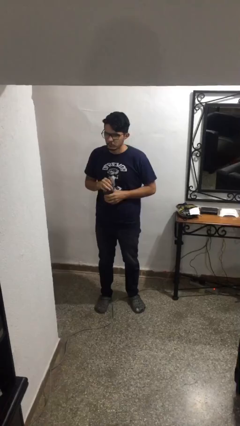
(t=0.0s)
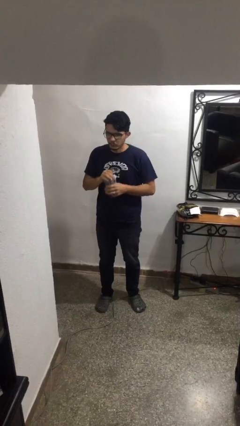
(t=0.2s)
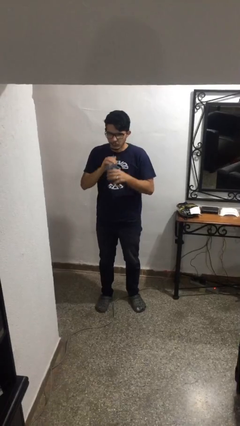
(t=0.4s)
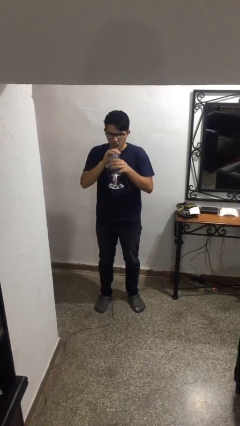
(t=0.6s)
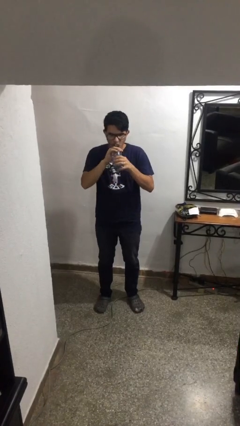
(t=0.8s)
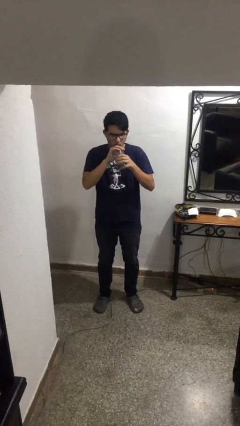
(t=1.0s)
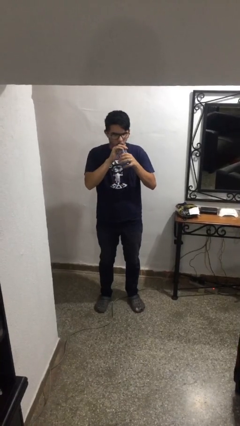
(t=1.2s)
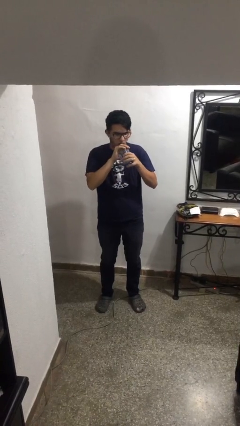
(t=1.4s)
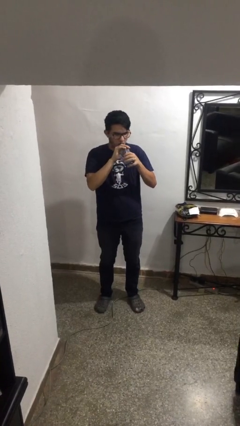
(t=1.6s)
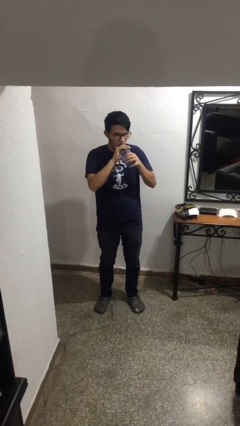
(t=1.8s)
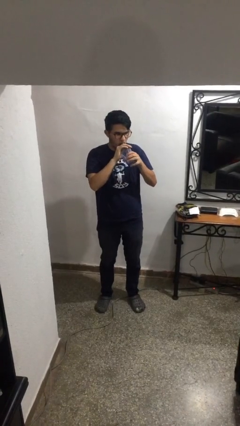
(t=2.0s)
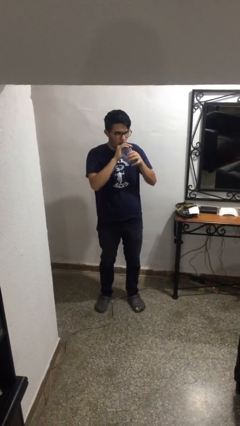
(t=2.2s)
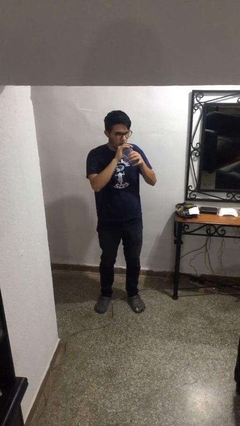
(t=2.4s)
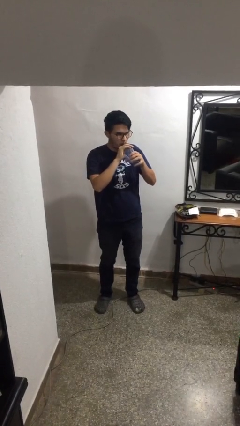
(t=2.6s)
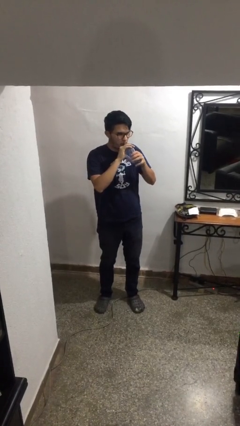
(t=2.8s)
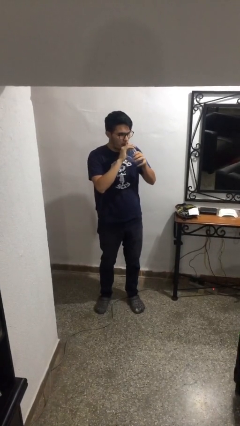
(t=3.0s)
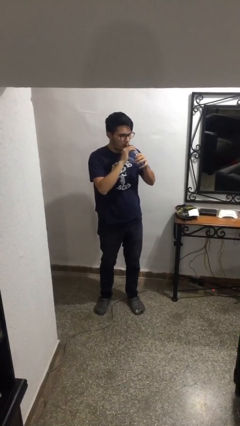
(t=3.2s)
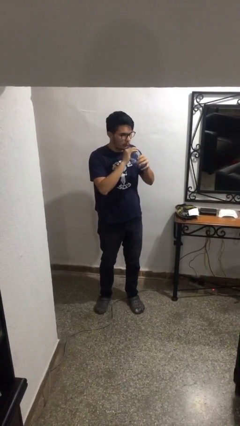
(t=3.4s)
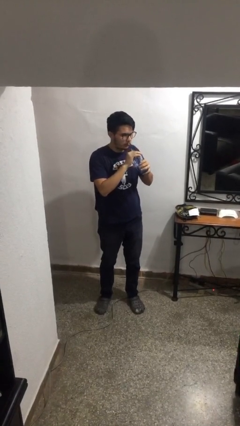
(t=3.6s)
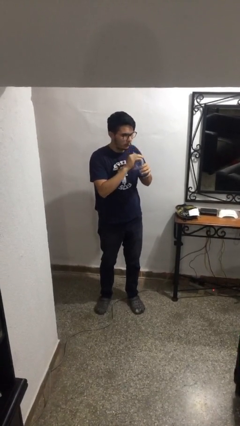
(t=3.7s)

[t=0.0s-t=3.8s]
person drinks from straw

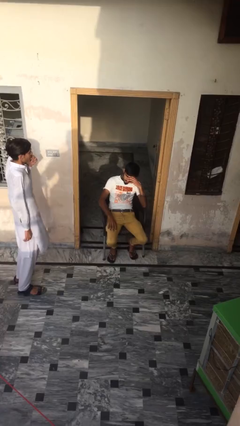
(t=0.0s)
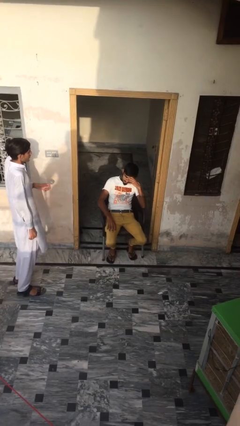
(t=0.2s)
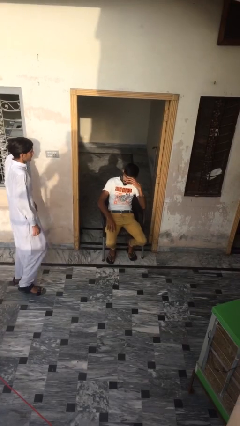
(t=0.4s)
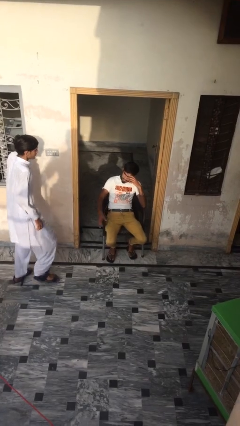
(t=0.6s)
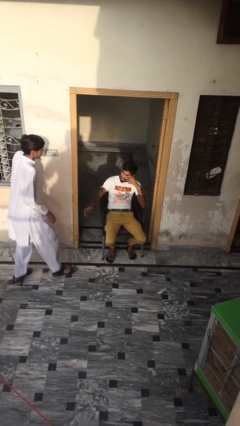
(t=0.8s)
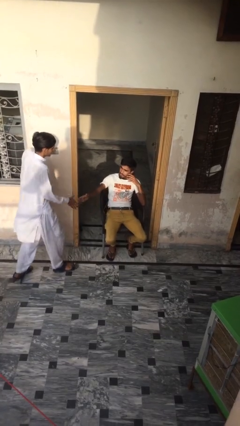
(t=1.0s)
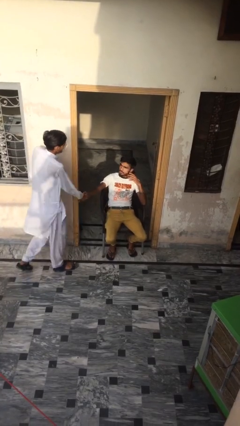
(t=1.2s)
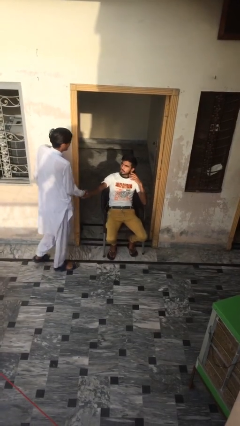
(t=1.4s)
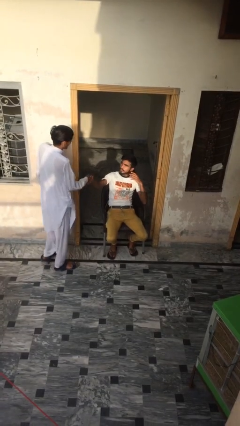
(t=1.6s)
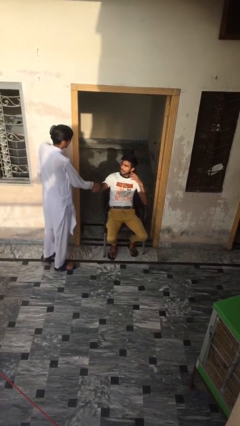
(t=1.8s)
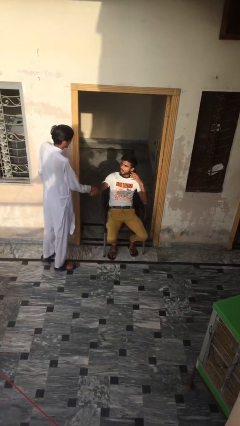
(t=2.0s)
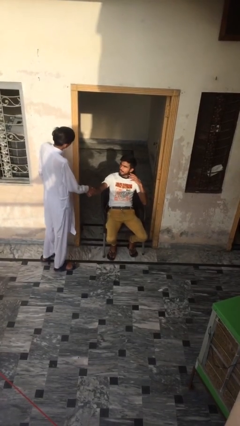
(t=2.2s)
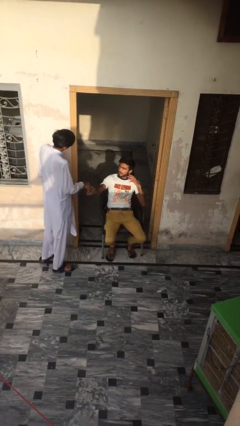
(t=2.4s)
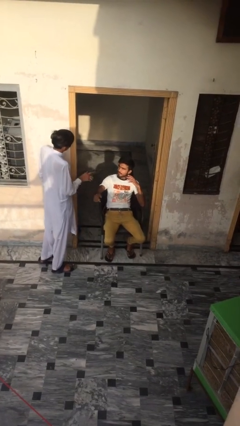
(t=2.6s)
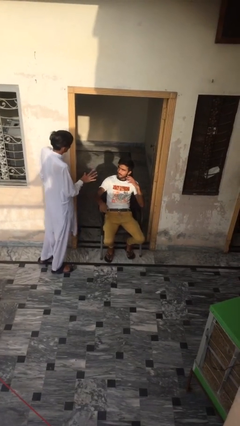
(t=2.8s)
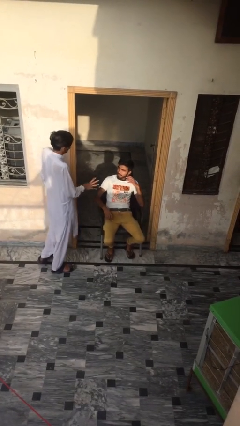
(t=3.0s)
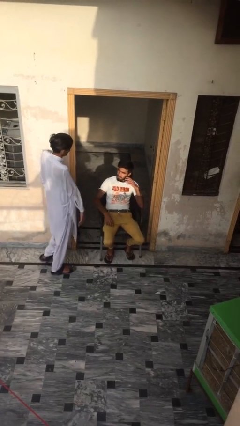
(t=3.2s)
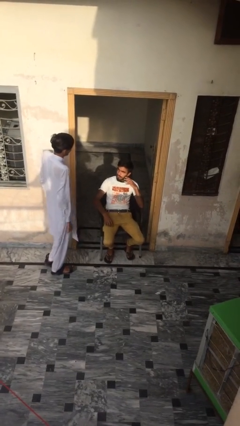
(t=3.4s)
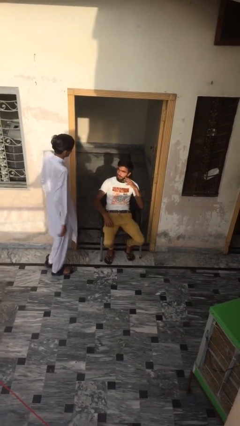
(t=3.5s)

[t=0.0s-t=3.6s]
person shakes hand

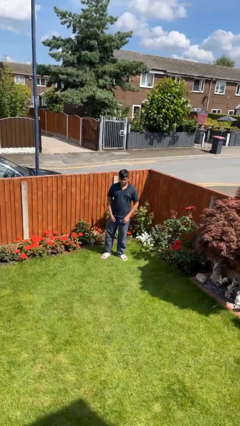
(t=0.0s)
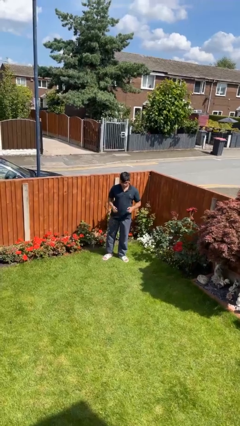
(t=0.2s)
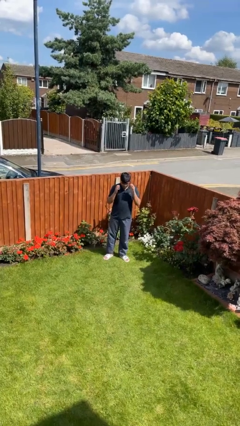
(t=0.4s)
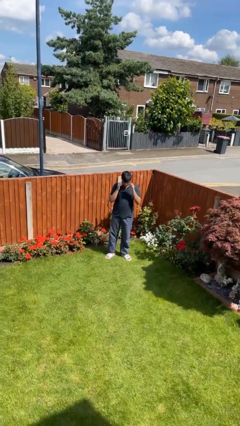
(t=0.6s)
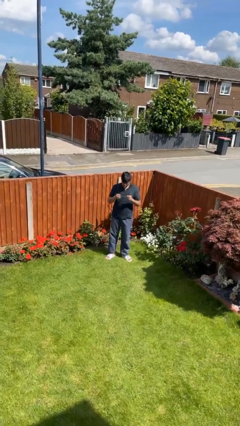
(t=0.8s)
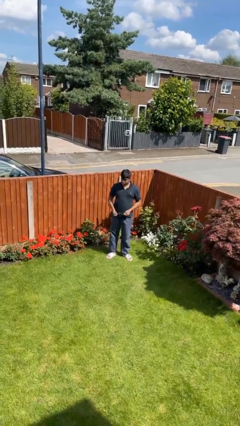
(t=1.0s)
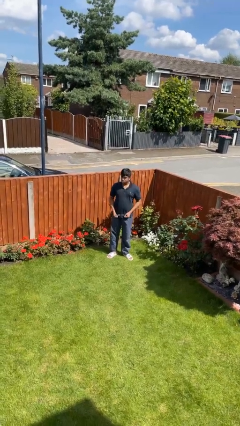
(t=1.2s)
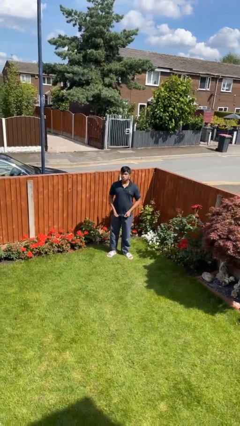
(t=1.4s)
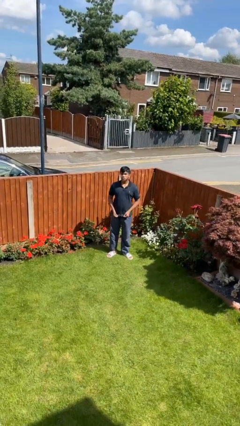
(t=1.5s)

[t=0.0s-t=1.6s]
person takes off glasses

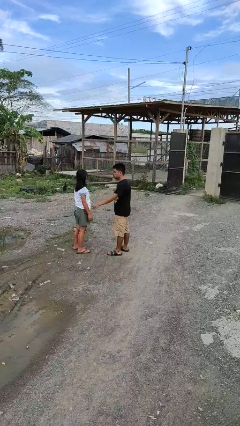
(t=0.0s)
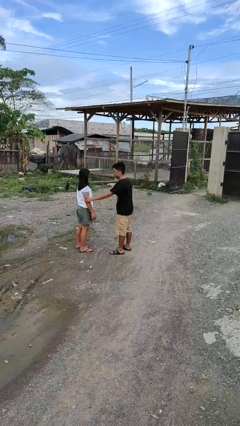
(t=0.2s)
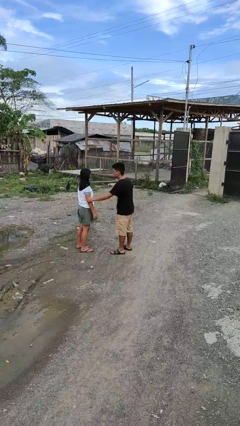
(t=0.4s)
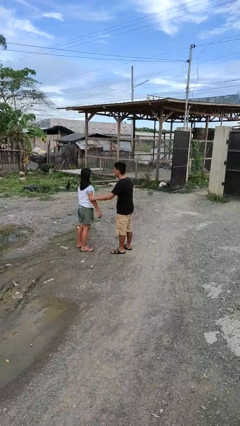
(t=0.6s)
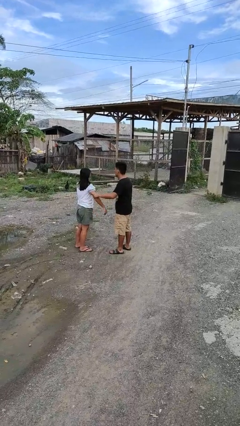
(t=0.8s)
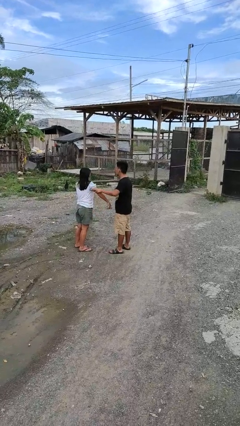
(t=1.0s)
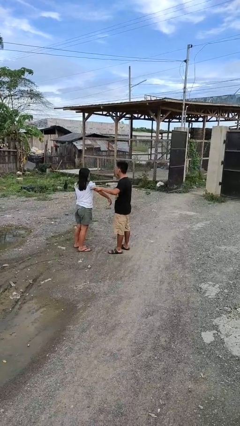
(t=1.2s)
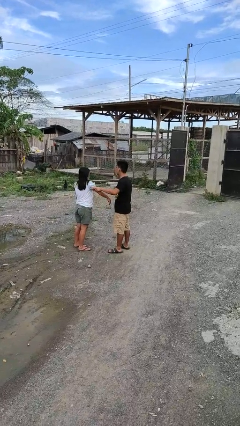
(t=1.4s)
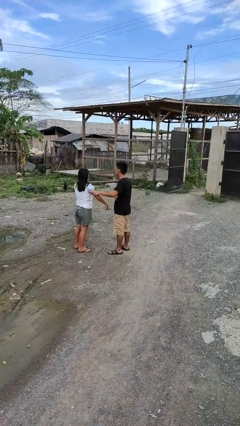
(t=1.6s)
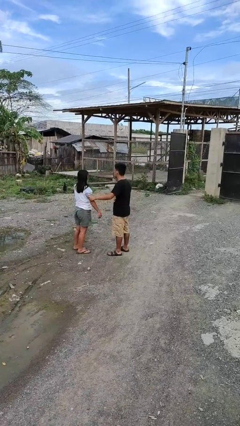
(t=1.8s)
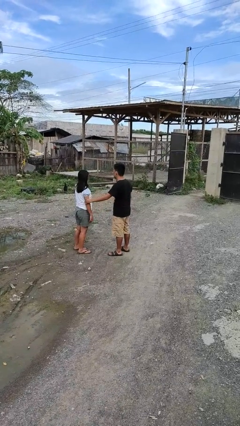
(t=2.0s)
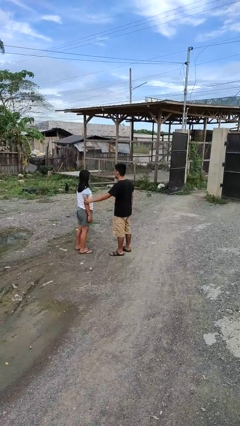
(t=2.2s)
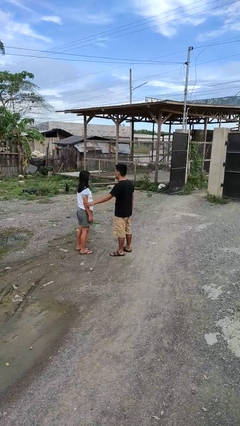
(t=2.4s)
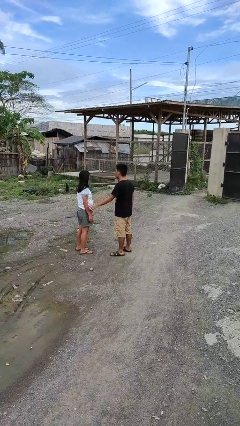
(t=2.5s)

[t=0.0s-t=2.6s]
person grabs person by bicep

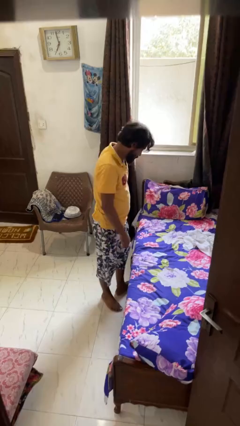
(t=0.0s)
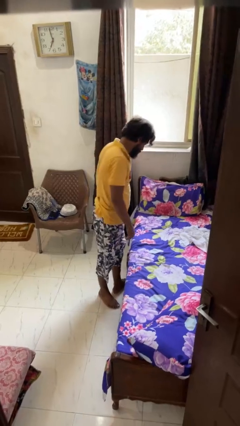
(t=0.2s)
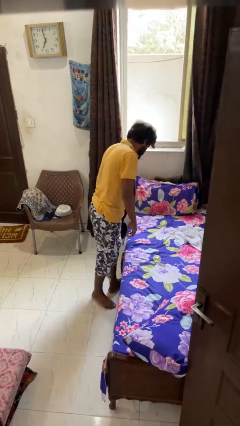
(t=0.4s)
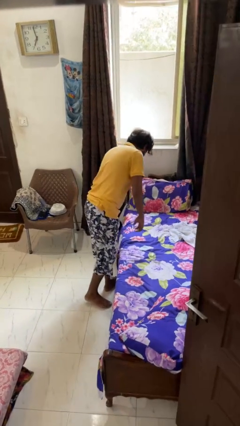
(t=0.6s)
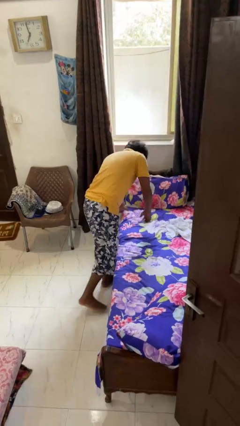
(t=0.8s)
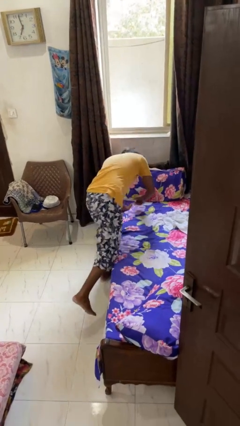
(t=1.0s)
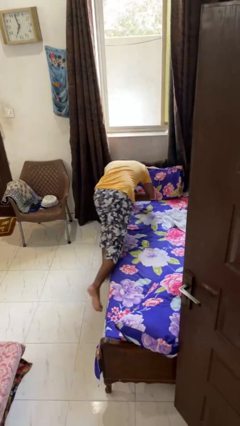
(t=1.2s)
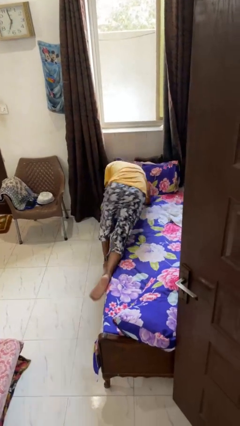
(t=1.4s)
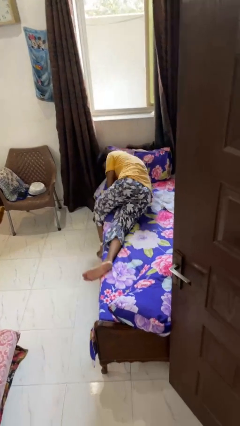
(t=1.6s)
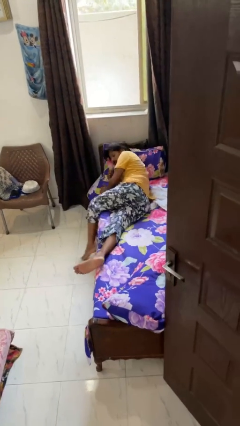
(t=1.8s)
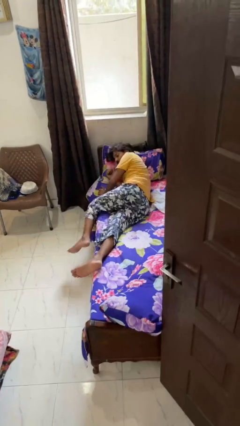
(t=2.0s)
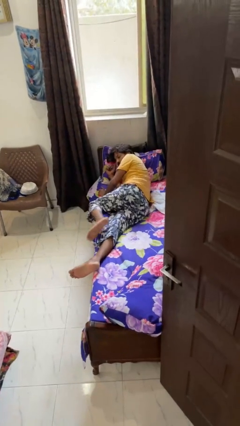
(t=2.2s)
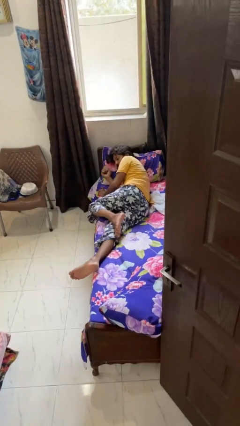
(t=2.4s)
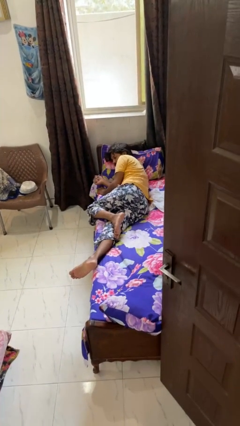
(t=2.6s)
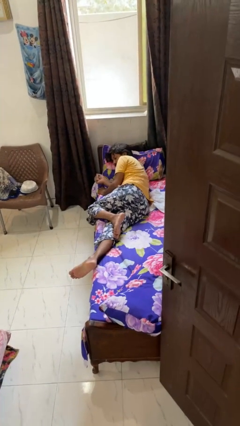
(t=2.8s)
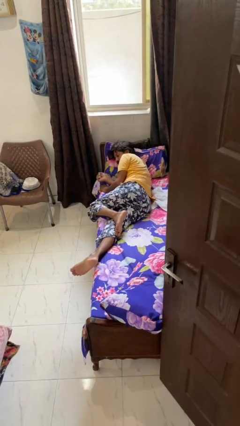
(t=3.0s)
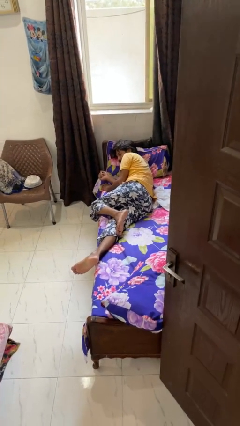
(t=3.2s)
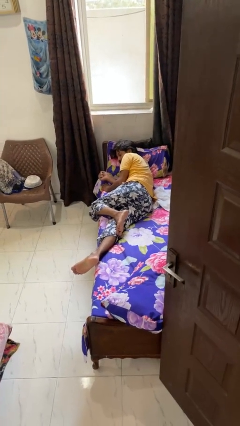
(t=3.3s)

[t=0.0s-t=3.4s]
person lies down on bed

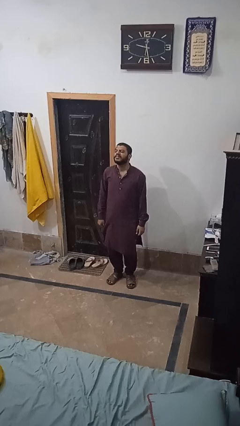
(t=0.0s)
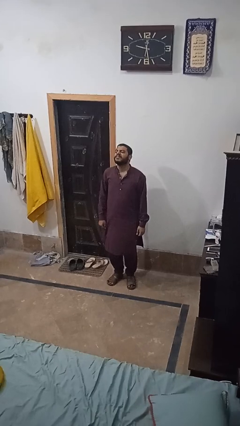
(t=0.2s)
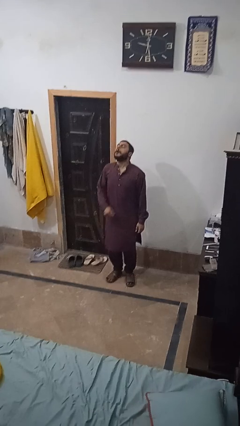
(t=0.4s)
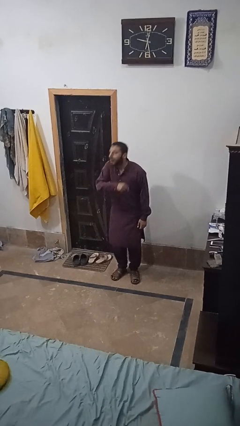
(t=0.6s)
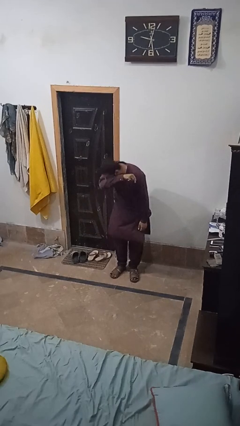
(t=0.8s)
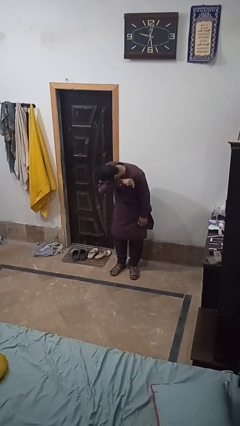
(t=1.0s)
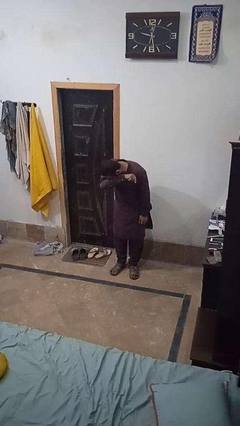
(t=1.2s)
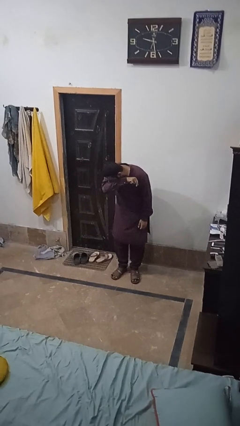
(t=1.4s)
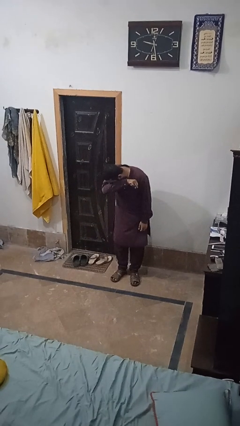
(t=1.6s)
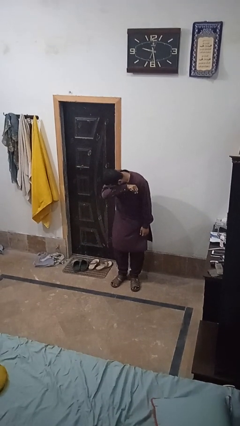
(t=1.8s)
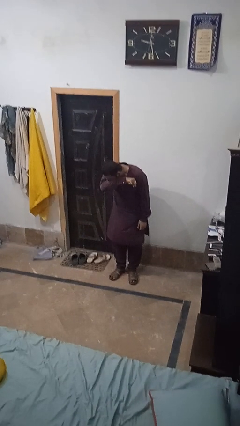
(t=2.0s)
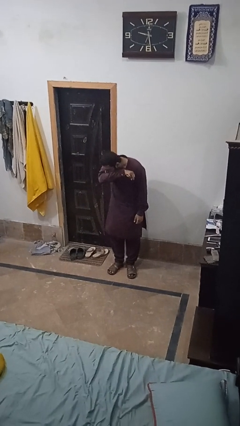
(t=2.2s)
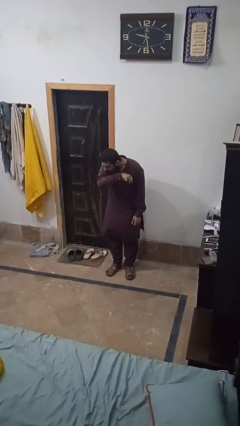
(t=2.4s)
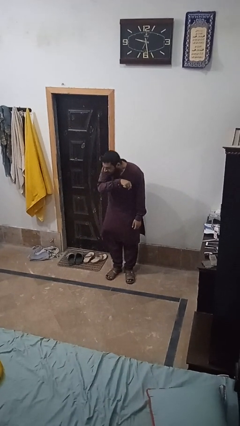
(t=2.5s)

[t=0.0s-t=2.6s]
person sneezes into arm
